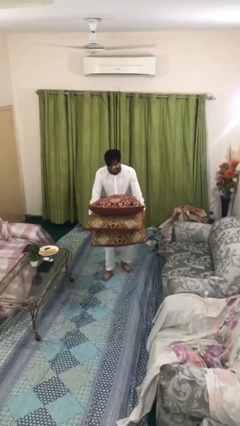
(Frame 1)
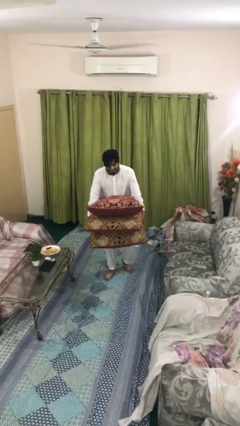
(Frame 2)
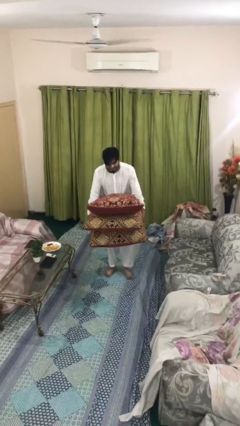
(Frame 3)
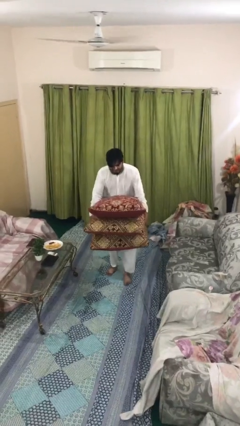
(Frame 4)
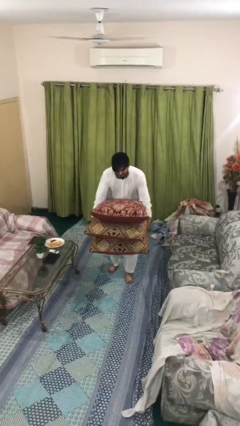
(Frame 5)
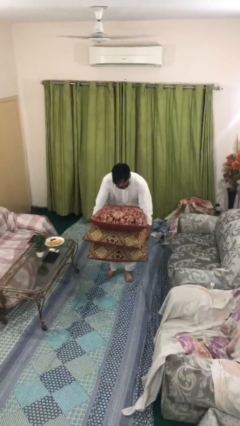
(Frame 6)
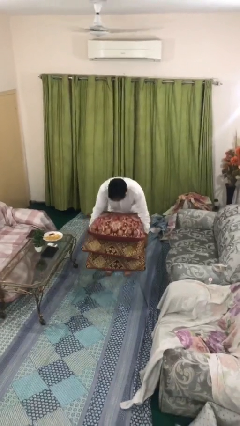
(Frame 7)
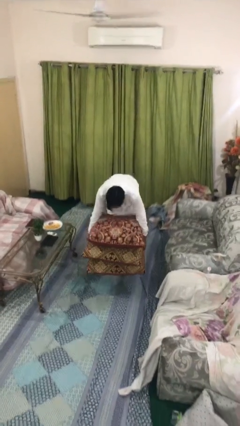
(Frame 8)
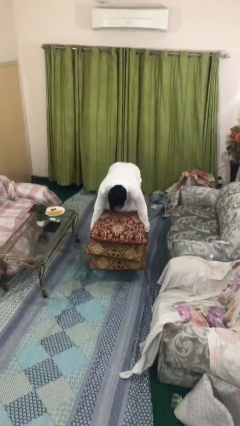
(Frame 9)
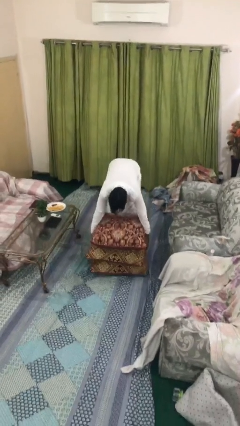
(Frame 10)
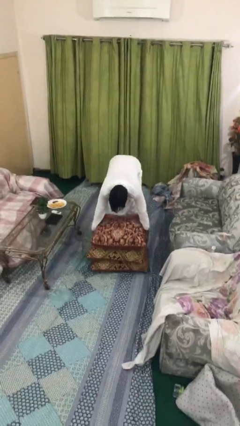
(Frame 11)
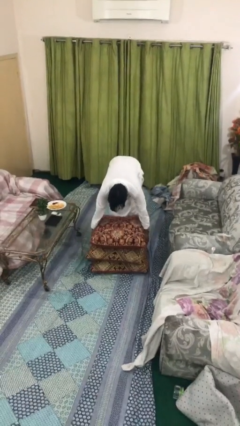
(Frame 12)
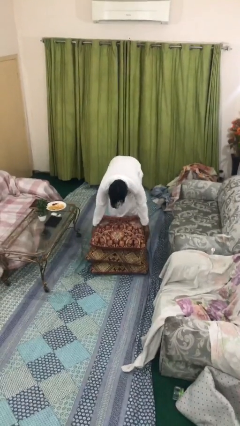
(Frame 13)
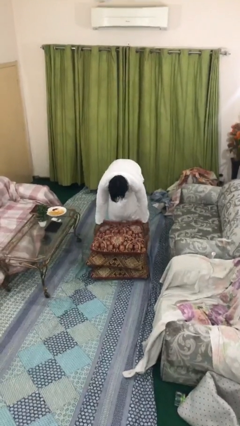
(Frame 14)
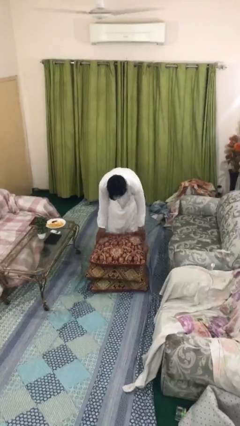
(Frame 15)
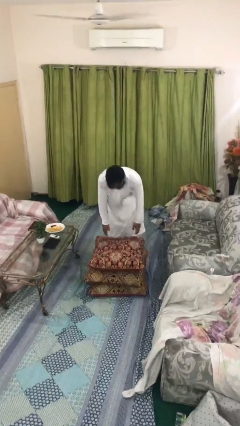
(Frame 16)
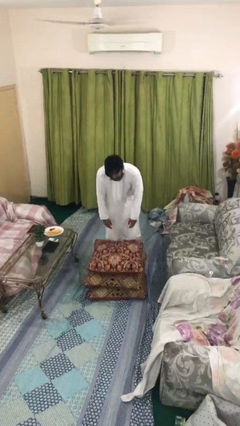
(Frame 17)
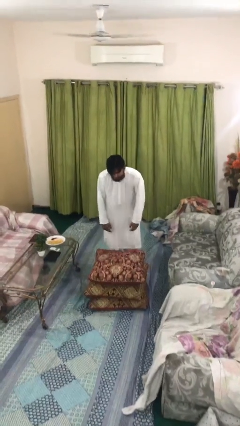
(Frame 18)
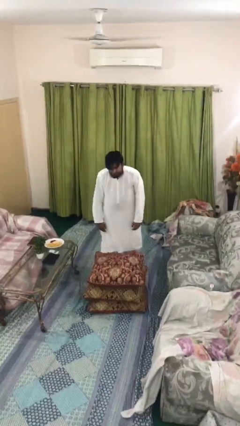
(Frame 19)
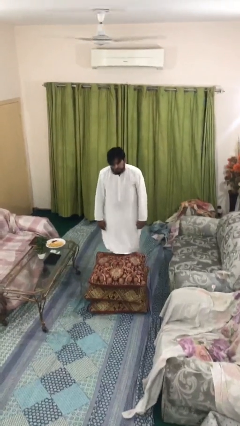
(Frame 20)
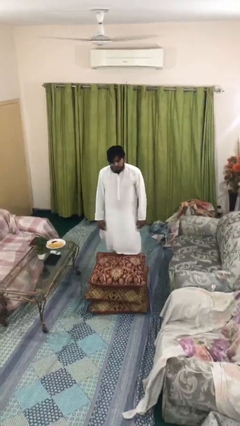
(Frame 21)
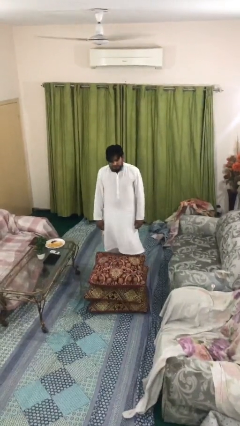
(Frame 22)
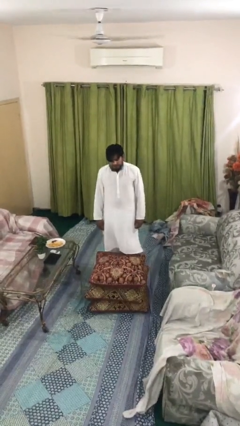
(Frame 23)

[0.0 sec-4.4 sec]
person puts down object on floor

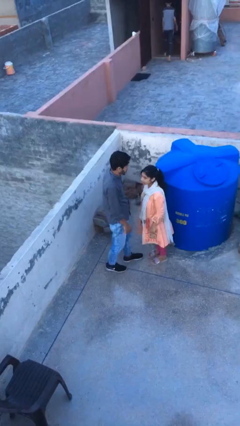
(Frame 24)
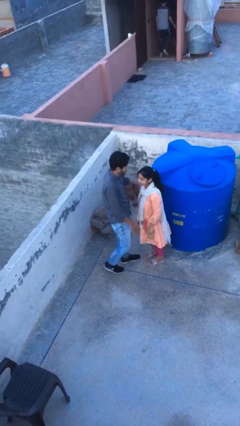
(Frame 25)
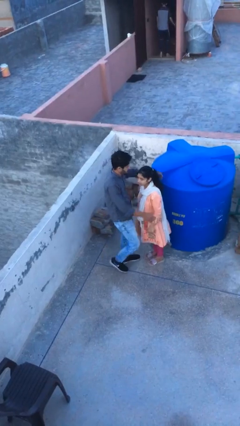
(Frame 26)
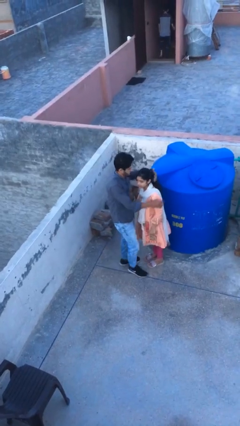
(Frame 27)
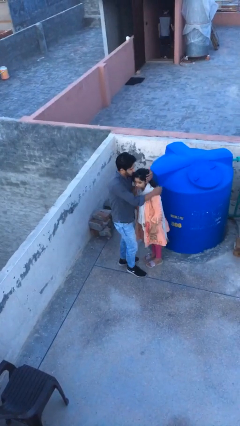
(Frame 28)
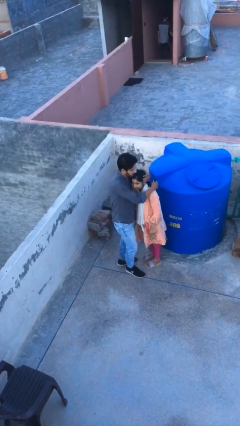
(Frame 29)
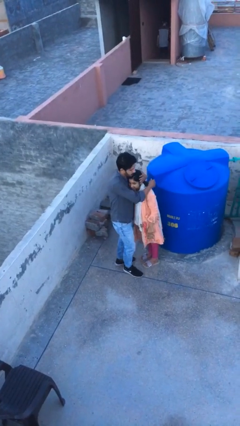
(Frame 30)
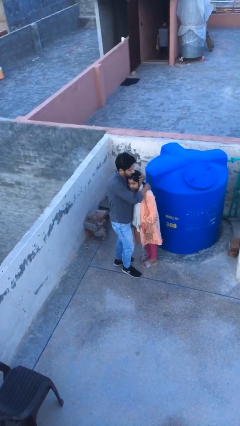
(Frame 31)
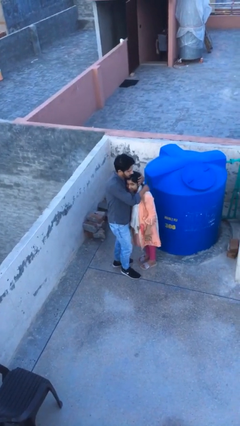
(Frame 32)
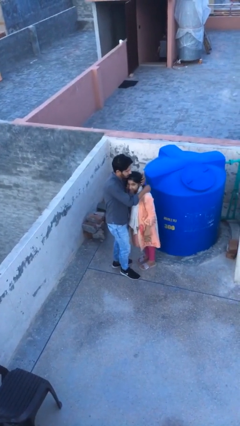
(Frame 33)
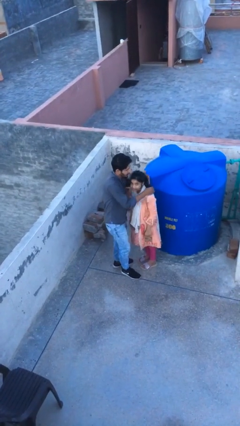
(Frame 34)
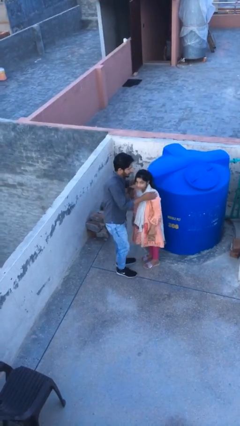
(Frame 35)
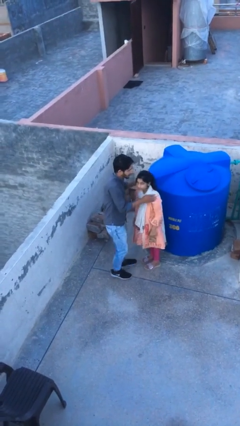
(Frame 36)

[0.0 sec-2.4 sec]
person embraces person

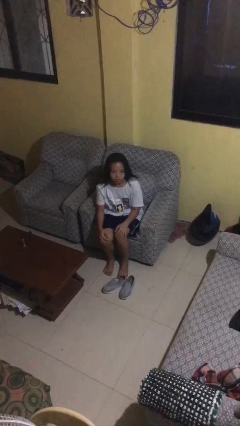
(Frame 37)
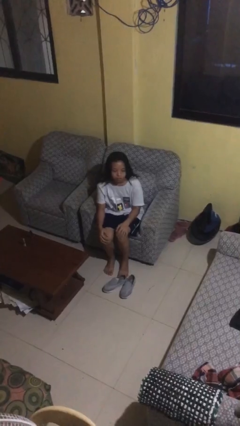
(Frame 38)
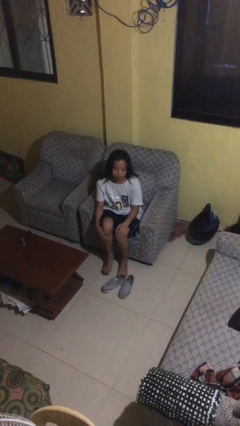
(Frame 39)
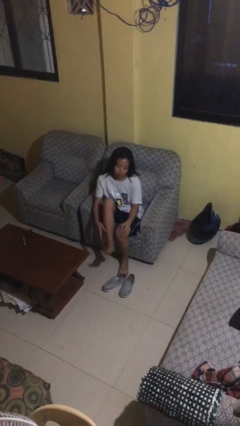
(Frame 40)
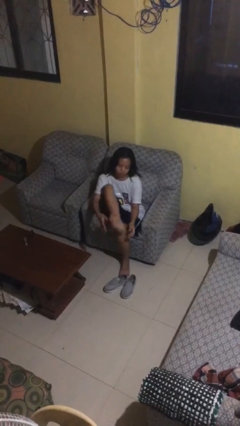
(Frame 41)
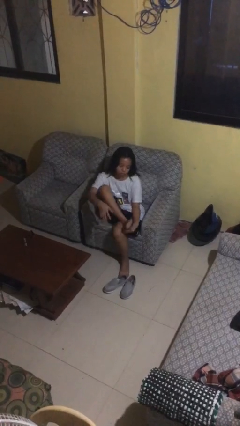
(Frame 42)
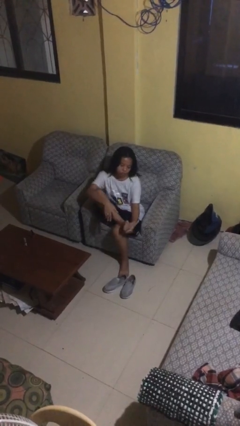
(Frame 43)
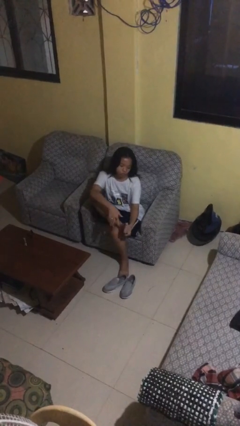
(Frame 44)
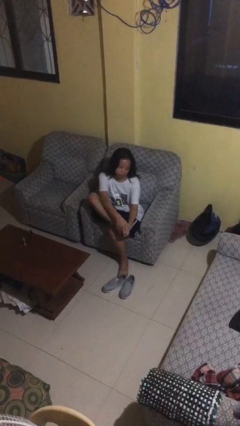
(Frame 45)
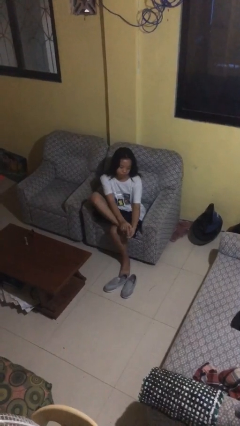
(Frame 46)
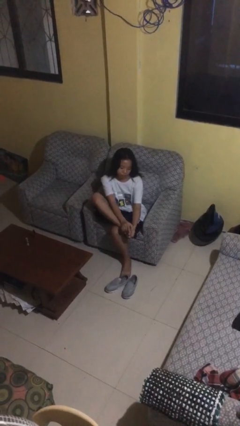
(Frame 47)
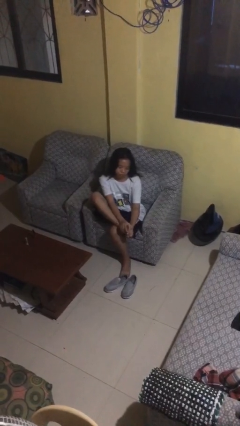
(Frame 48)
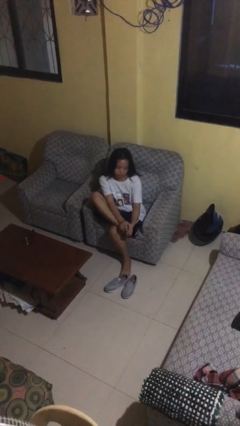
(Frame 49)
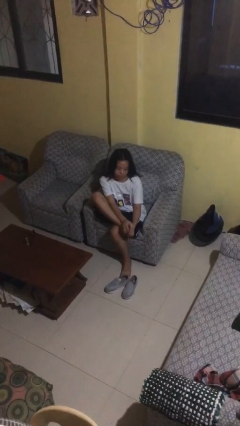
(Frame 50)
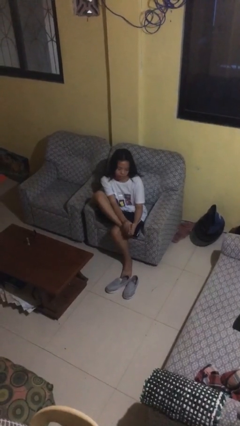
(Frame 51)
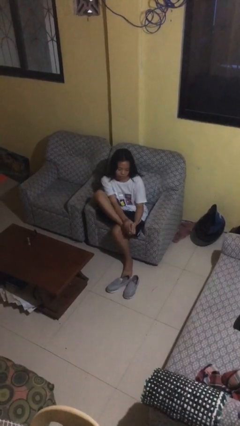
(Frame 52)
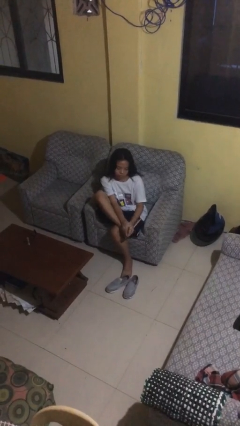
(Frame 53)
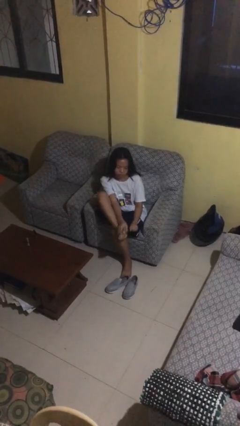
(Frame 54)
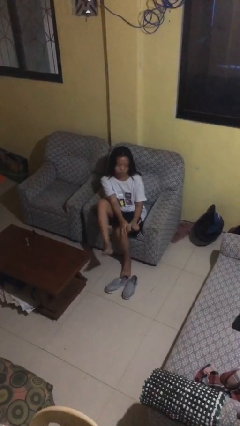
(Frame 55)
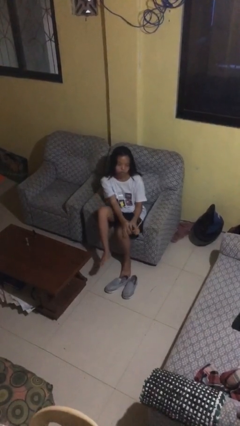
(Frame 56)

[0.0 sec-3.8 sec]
person rubs foot

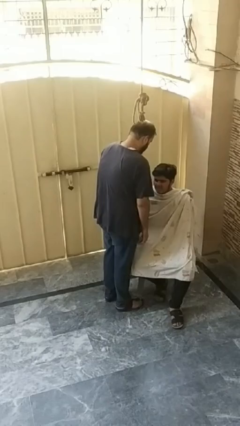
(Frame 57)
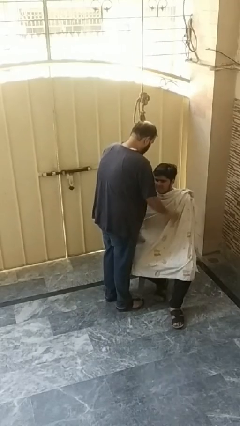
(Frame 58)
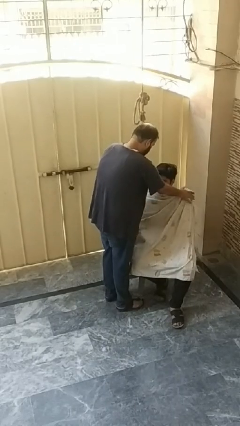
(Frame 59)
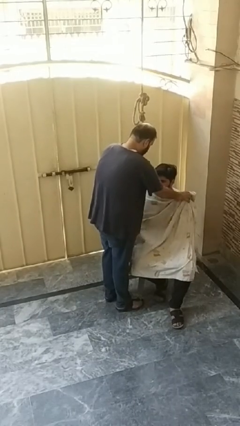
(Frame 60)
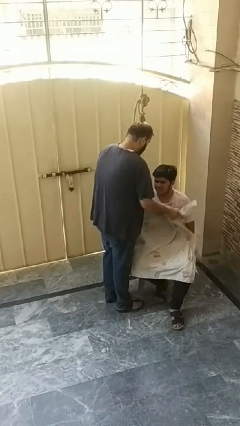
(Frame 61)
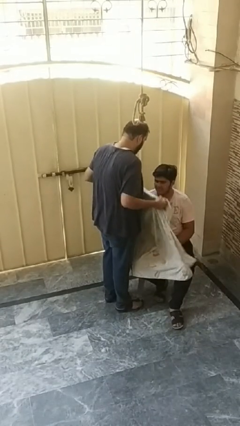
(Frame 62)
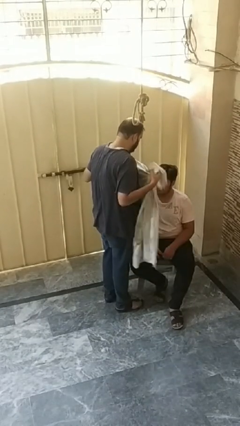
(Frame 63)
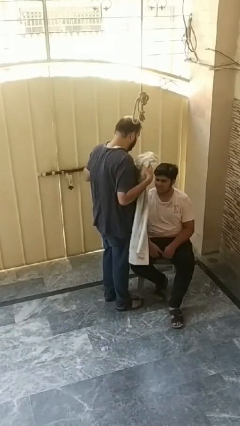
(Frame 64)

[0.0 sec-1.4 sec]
person uncovers friend with blanket

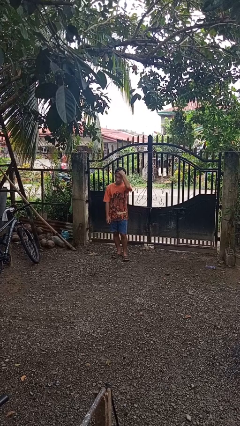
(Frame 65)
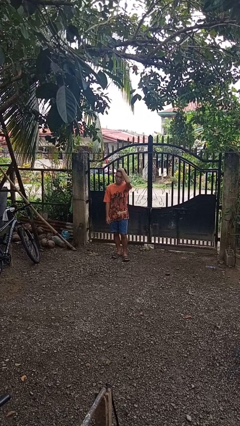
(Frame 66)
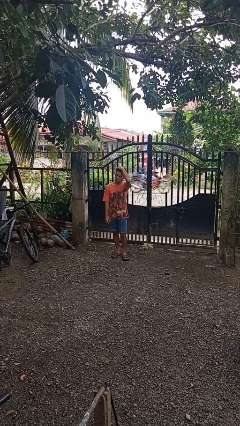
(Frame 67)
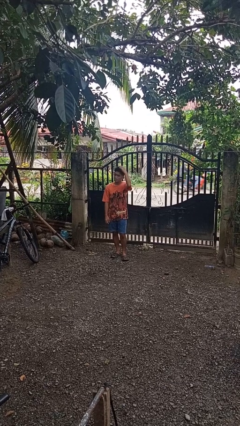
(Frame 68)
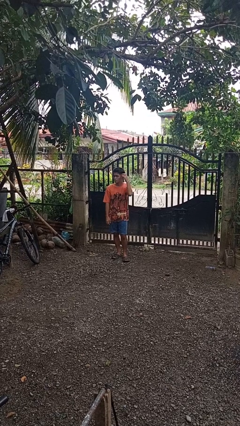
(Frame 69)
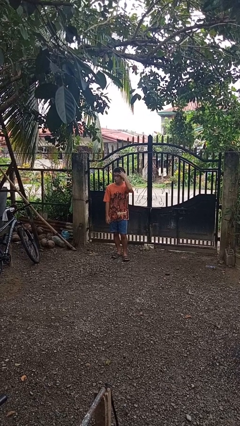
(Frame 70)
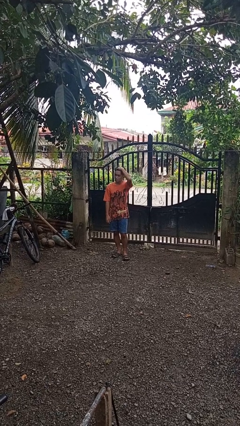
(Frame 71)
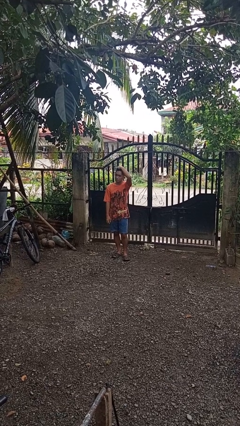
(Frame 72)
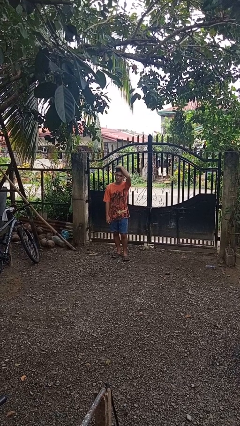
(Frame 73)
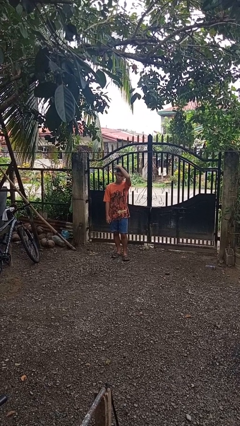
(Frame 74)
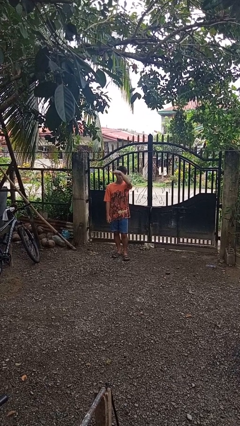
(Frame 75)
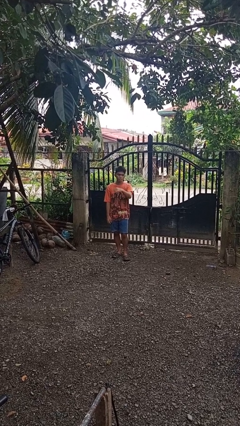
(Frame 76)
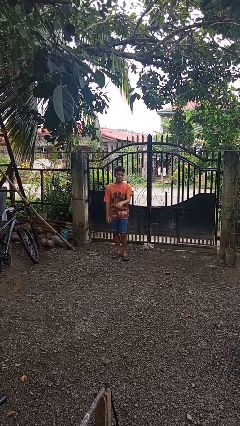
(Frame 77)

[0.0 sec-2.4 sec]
person strokes hair

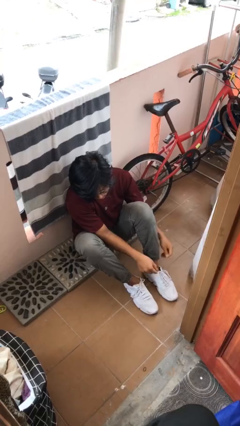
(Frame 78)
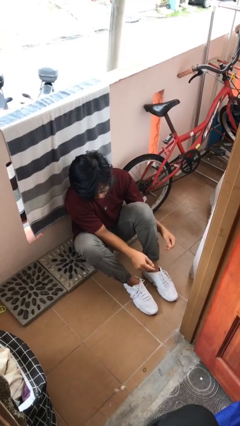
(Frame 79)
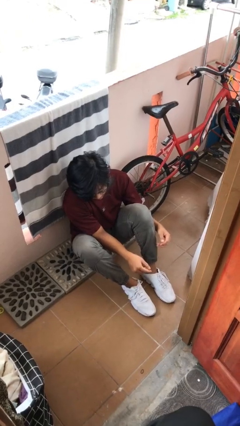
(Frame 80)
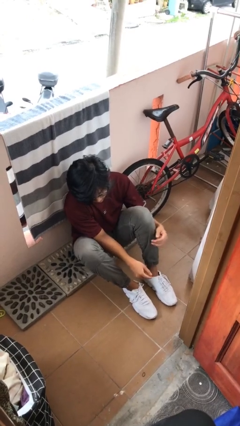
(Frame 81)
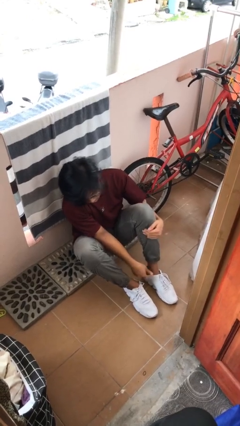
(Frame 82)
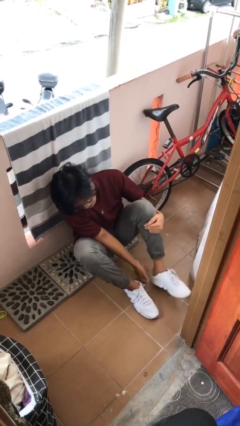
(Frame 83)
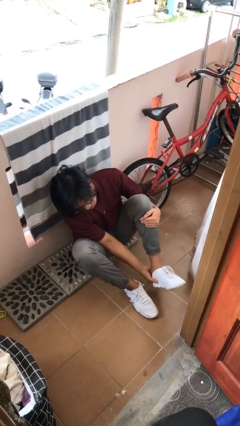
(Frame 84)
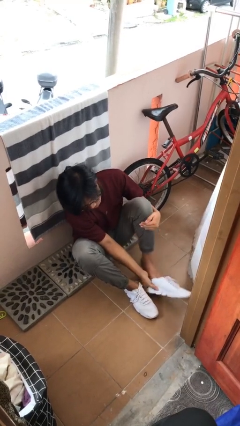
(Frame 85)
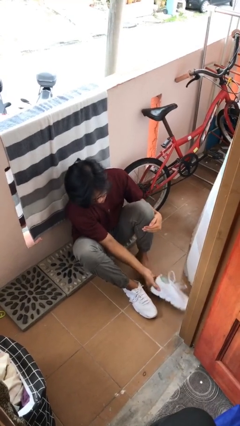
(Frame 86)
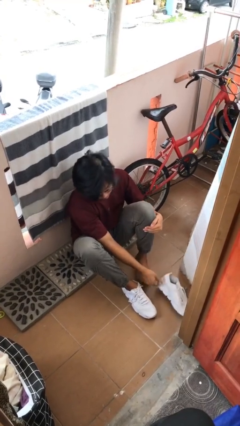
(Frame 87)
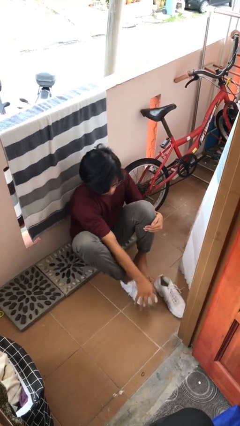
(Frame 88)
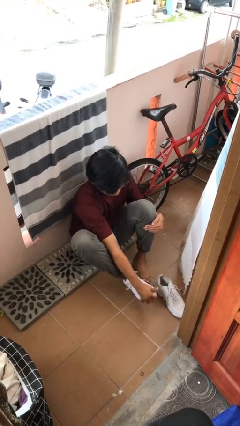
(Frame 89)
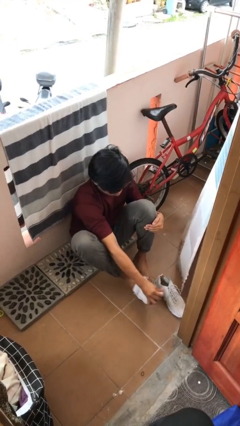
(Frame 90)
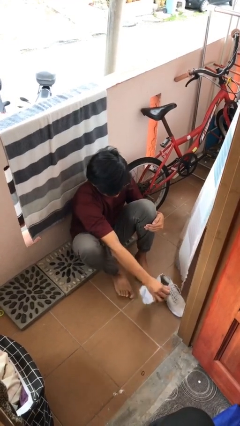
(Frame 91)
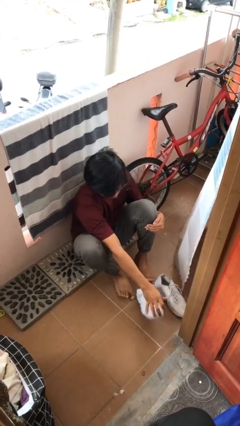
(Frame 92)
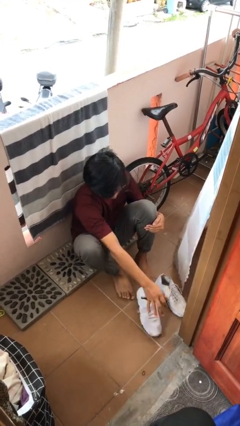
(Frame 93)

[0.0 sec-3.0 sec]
person takes off shoes
